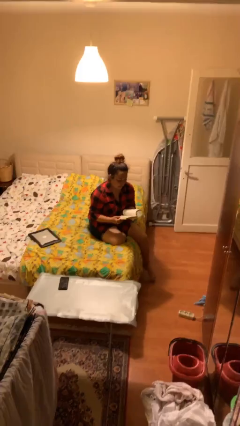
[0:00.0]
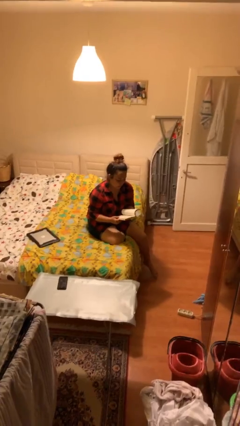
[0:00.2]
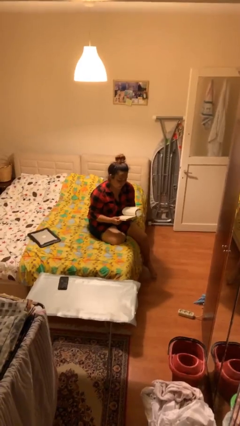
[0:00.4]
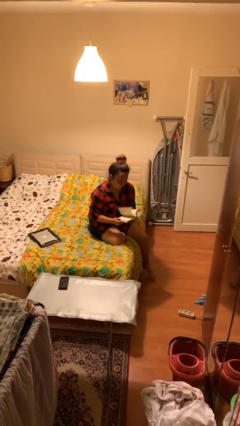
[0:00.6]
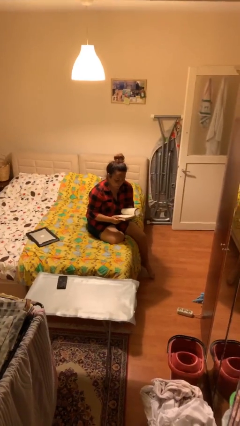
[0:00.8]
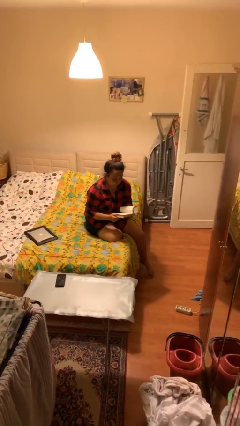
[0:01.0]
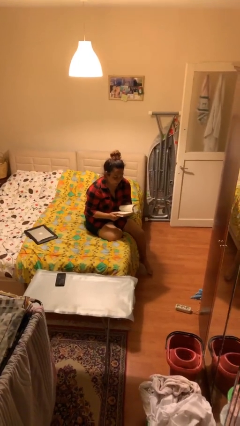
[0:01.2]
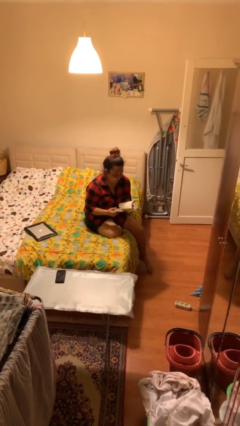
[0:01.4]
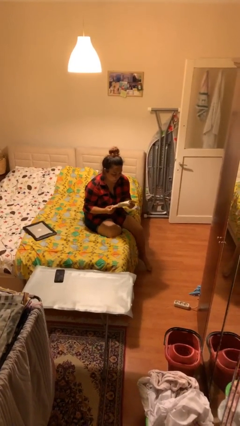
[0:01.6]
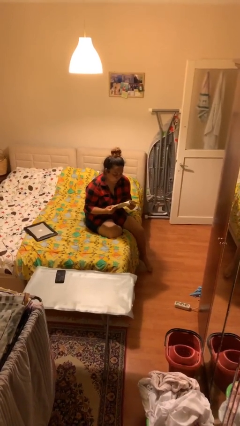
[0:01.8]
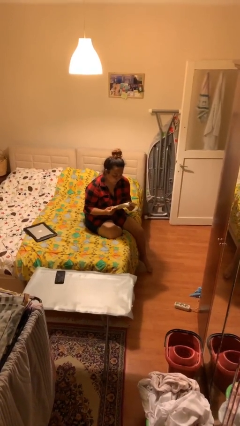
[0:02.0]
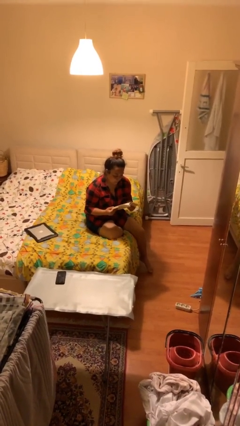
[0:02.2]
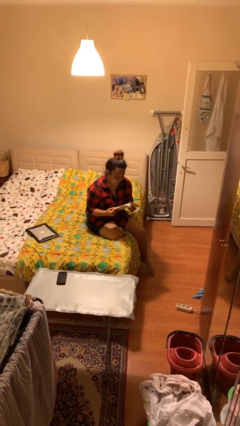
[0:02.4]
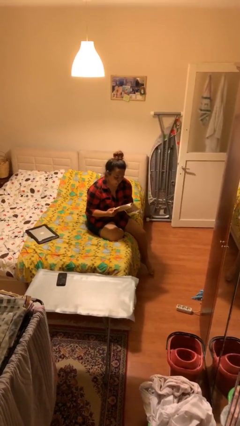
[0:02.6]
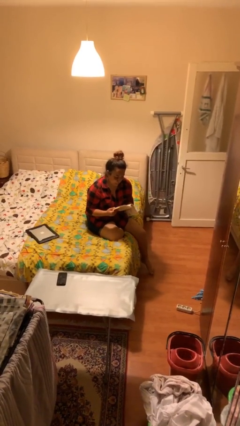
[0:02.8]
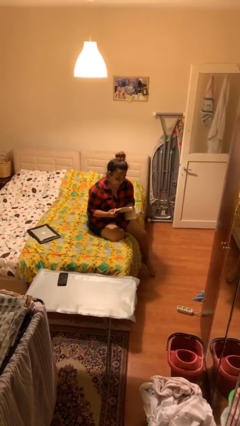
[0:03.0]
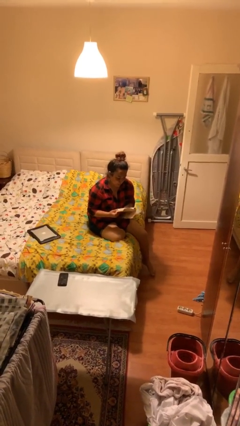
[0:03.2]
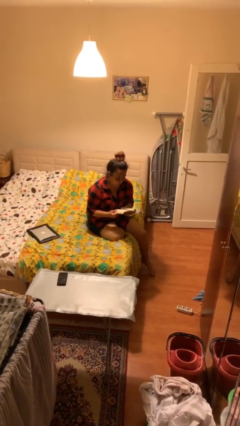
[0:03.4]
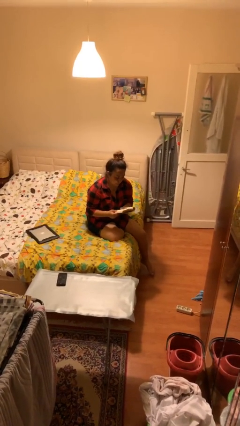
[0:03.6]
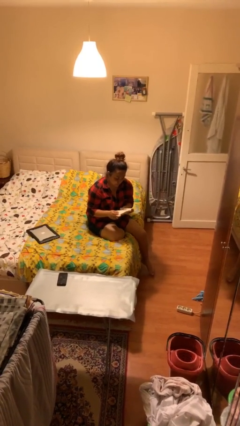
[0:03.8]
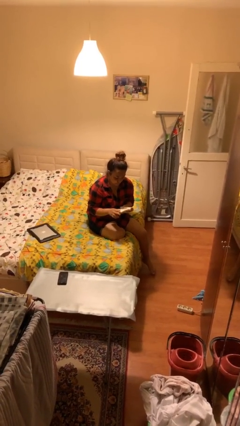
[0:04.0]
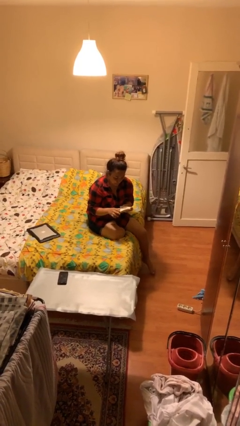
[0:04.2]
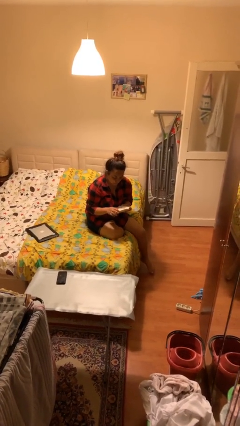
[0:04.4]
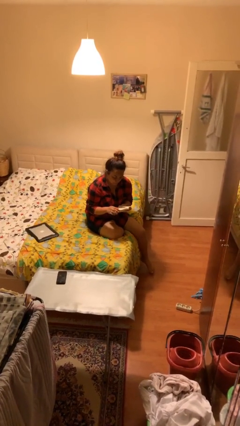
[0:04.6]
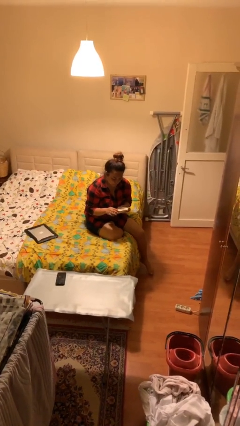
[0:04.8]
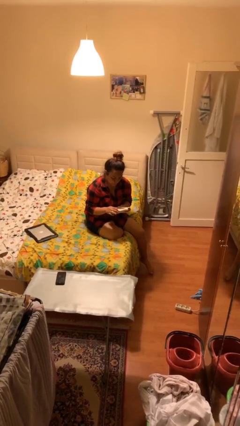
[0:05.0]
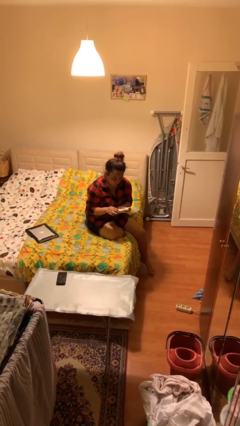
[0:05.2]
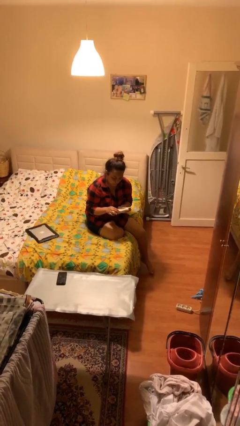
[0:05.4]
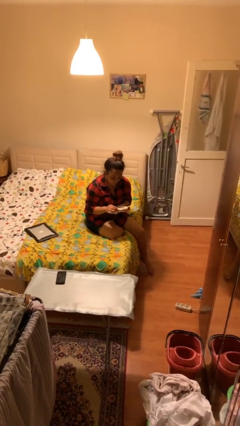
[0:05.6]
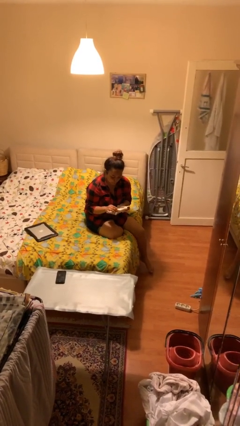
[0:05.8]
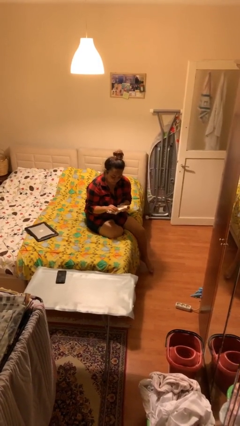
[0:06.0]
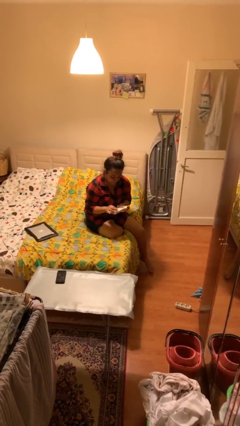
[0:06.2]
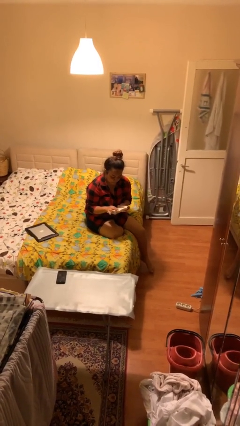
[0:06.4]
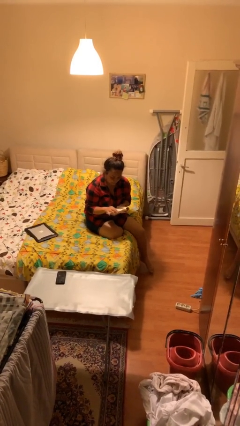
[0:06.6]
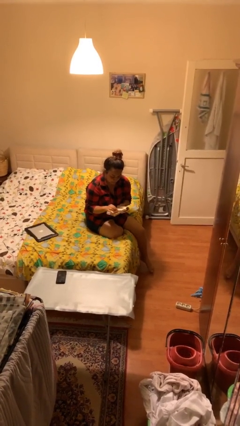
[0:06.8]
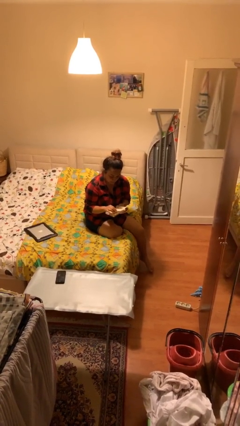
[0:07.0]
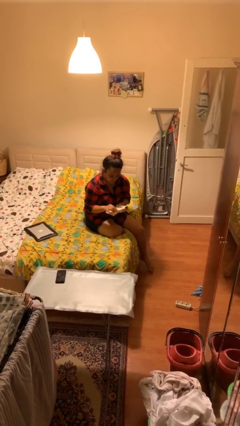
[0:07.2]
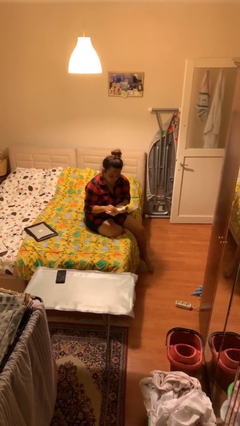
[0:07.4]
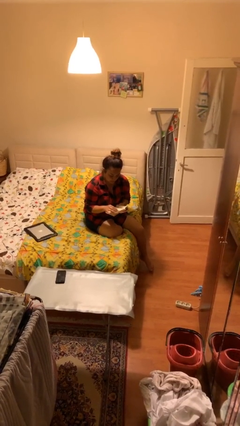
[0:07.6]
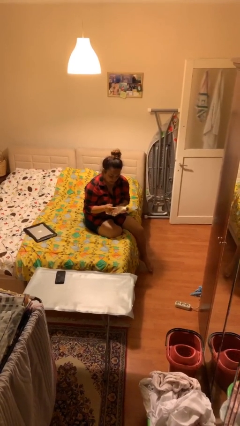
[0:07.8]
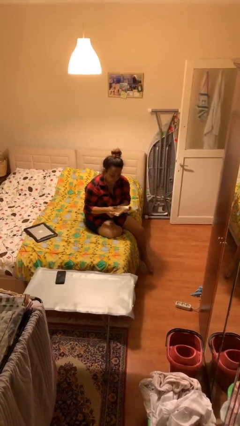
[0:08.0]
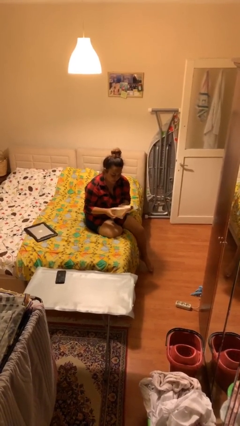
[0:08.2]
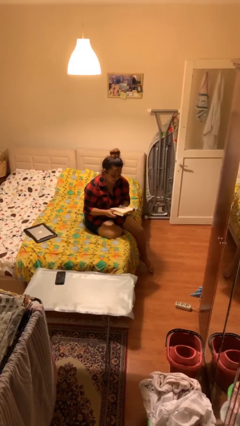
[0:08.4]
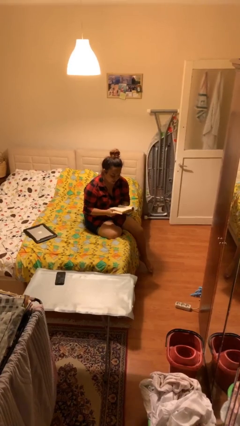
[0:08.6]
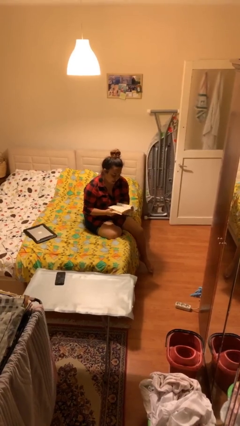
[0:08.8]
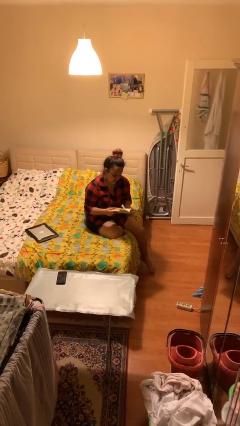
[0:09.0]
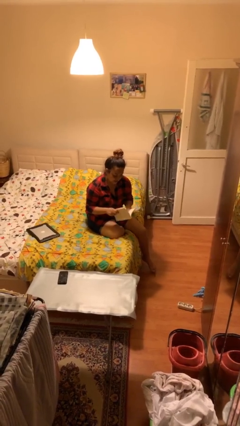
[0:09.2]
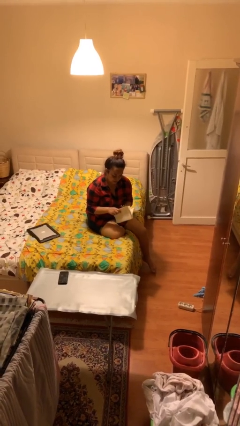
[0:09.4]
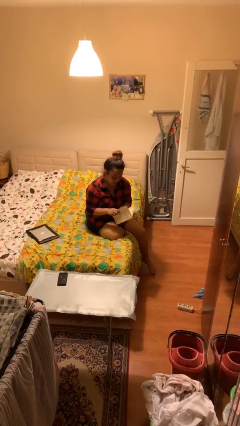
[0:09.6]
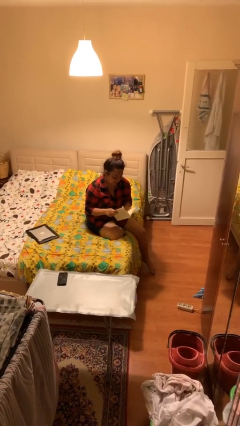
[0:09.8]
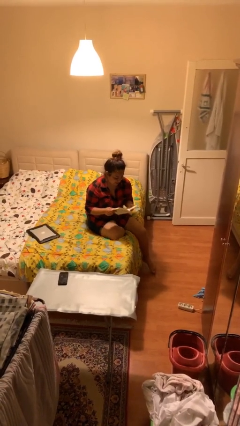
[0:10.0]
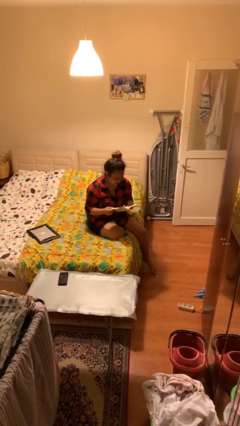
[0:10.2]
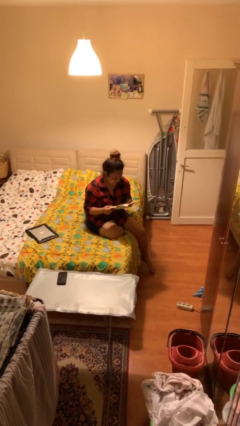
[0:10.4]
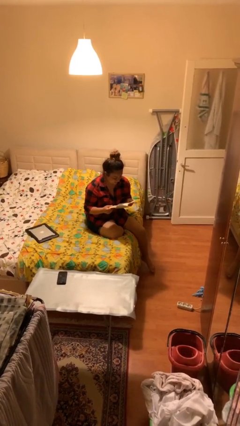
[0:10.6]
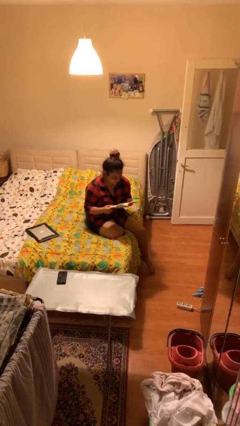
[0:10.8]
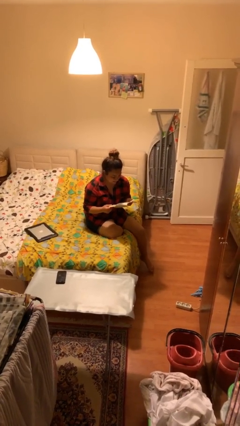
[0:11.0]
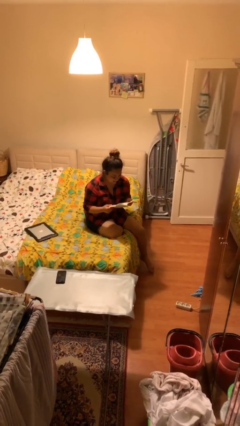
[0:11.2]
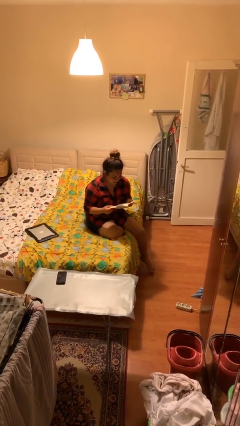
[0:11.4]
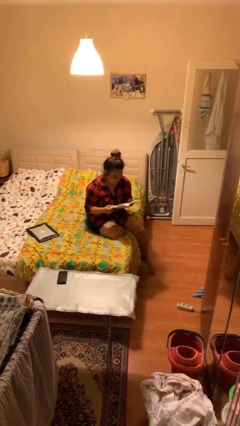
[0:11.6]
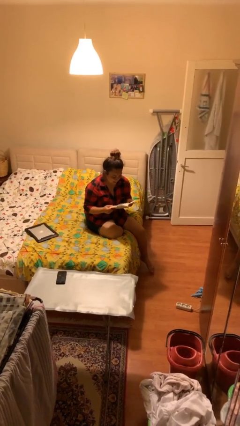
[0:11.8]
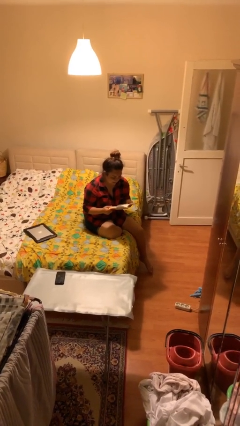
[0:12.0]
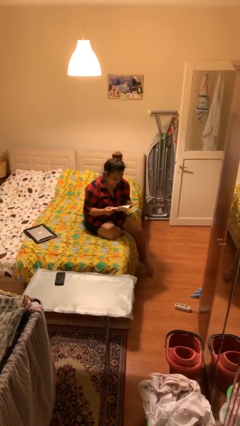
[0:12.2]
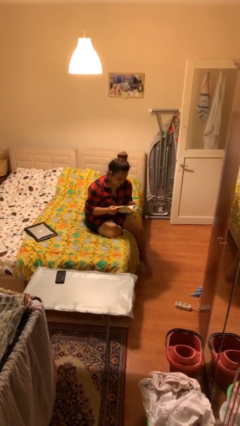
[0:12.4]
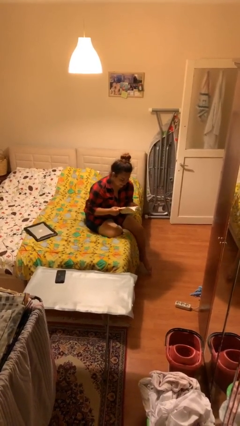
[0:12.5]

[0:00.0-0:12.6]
person reads document

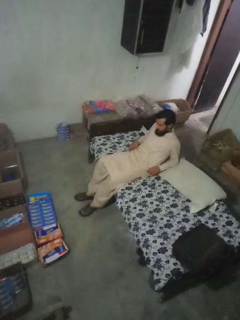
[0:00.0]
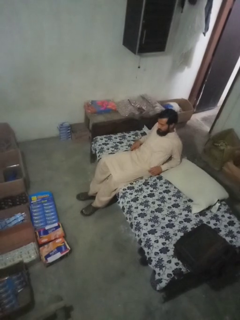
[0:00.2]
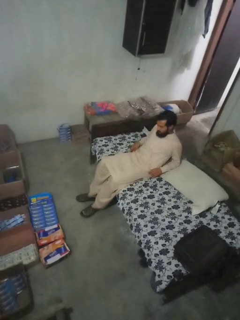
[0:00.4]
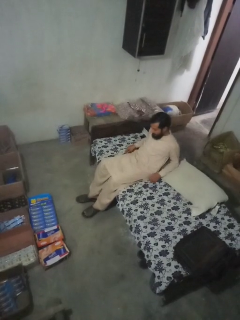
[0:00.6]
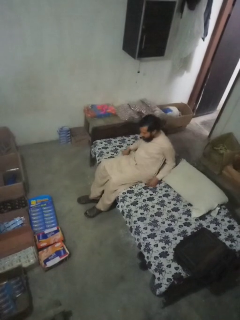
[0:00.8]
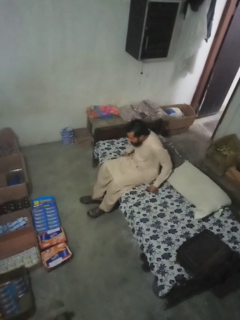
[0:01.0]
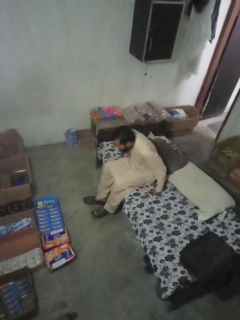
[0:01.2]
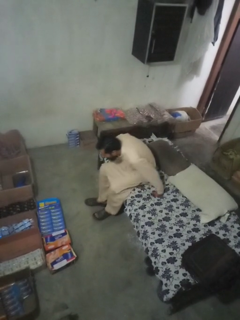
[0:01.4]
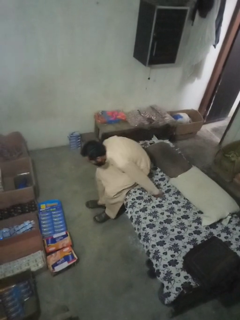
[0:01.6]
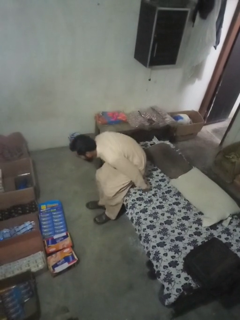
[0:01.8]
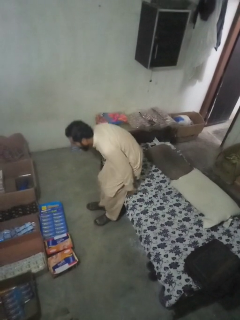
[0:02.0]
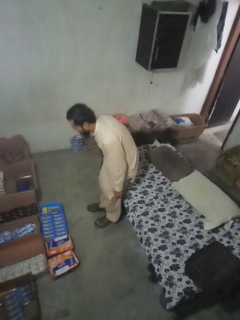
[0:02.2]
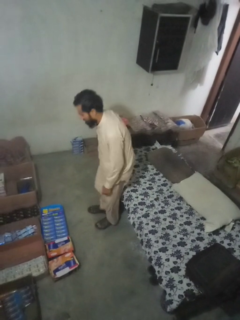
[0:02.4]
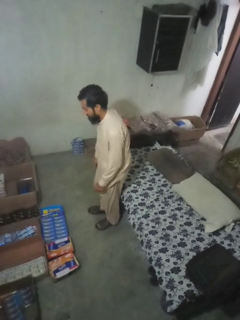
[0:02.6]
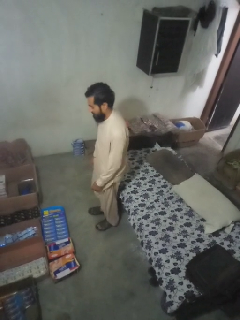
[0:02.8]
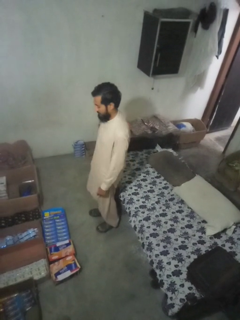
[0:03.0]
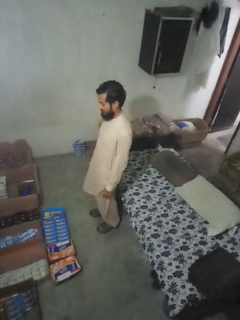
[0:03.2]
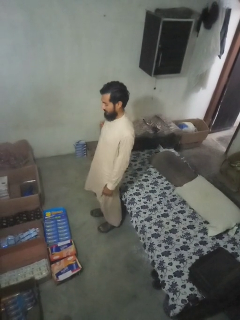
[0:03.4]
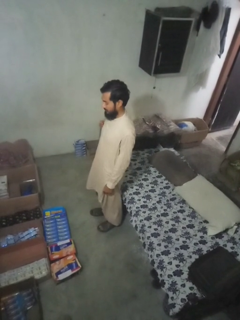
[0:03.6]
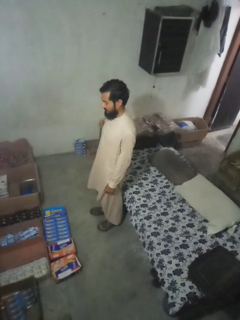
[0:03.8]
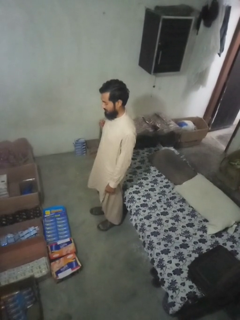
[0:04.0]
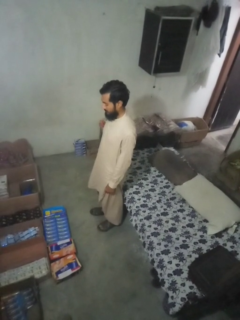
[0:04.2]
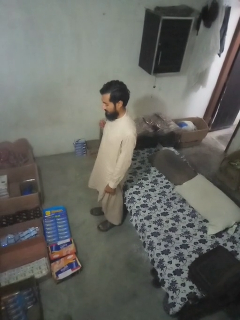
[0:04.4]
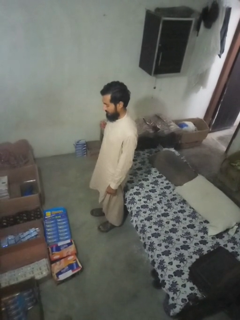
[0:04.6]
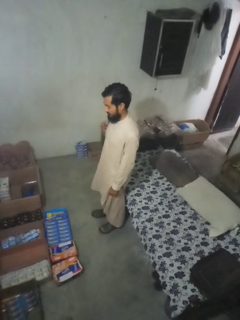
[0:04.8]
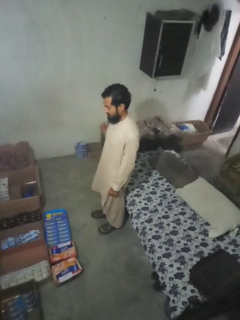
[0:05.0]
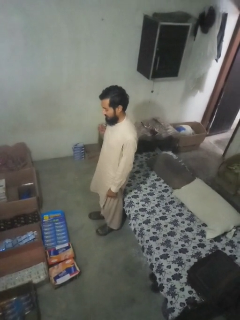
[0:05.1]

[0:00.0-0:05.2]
person stands up

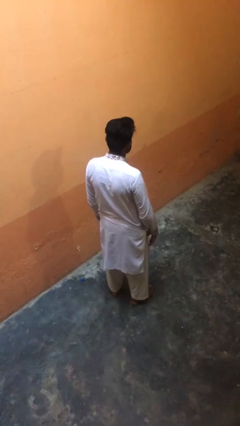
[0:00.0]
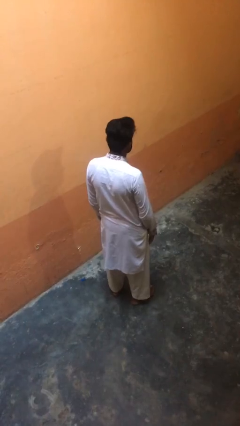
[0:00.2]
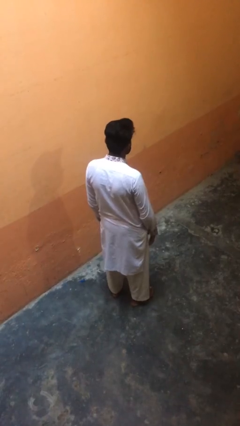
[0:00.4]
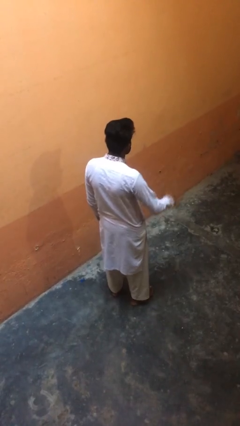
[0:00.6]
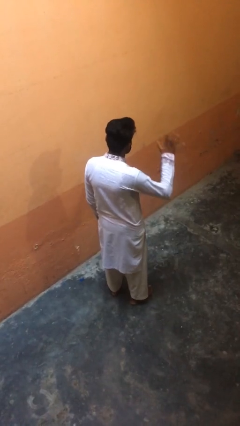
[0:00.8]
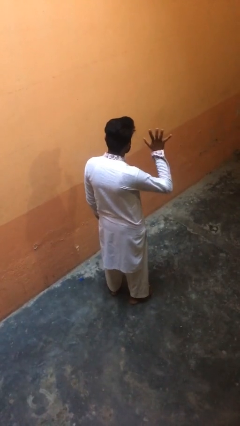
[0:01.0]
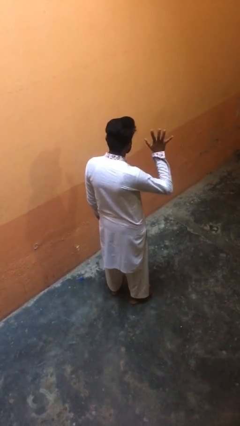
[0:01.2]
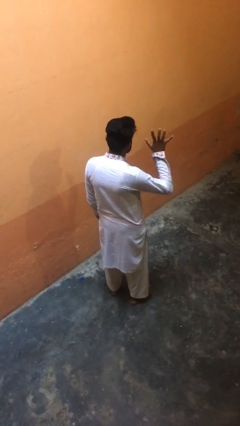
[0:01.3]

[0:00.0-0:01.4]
person gestures number five

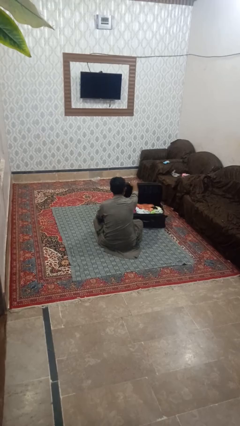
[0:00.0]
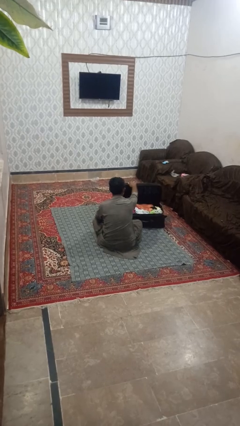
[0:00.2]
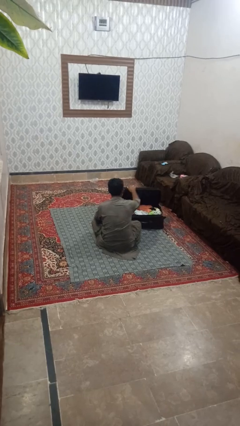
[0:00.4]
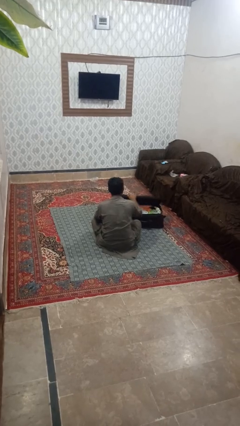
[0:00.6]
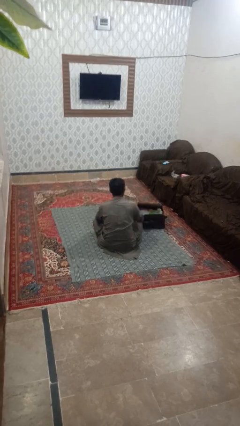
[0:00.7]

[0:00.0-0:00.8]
person closes suitcase
